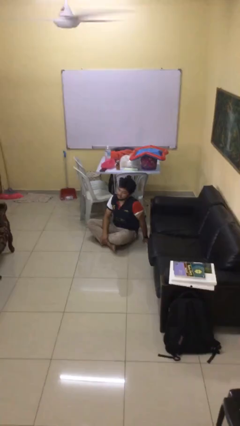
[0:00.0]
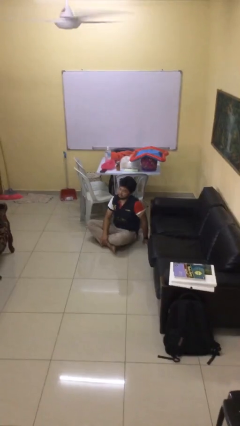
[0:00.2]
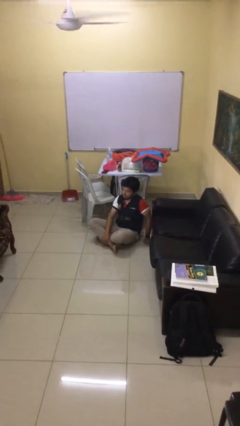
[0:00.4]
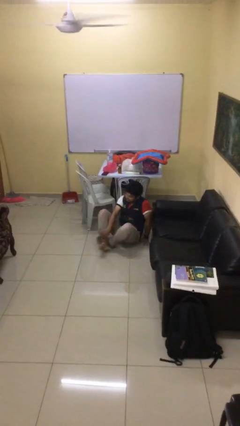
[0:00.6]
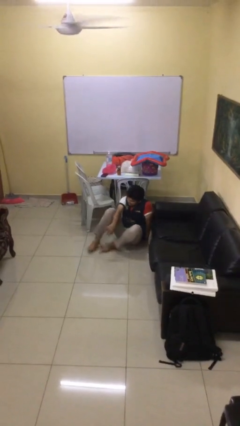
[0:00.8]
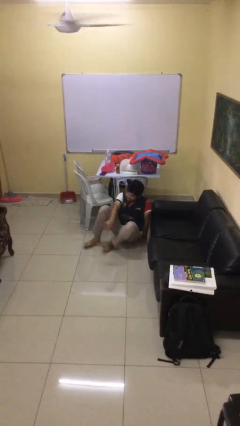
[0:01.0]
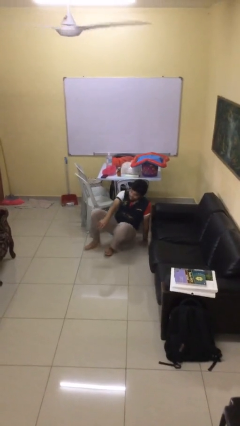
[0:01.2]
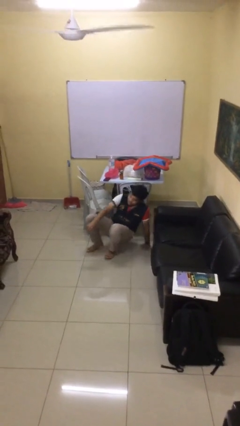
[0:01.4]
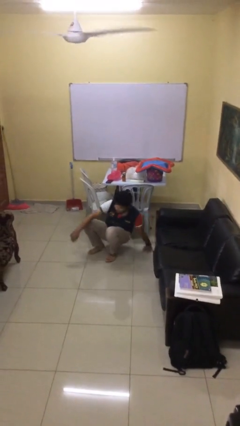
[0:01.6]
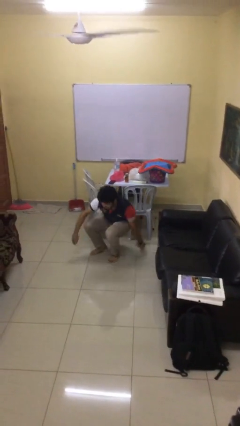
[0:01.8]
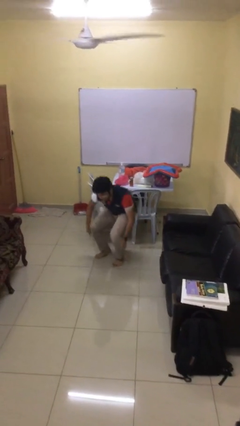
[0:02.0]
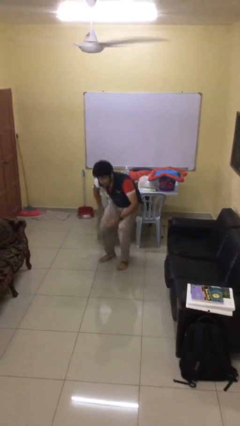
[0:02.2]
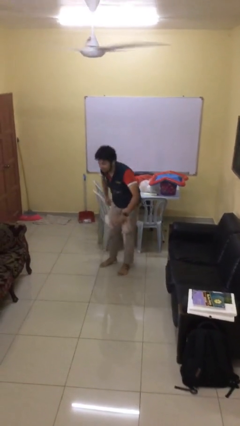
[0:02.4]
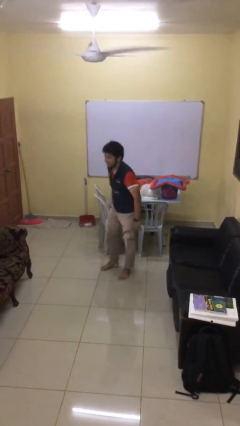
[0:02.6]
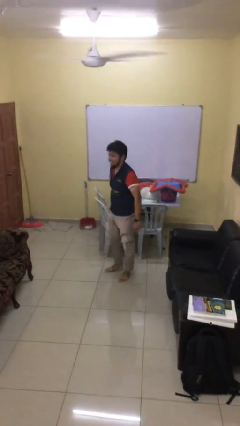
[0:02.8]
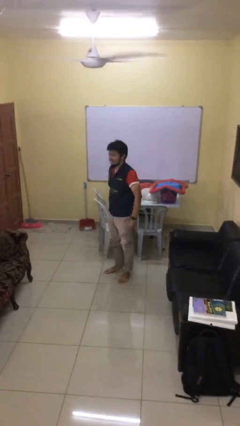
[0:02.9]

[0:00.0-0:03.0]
person stands up from floor

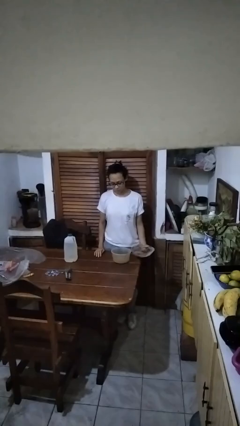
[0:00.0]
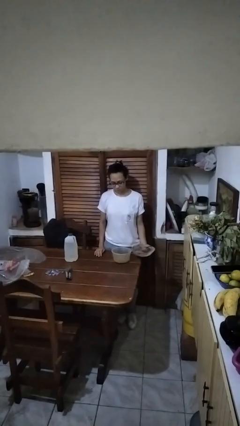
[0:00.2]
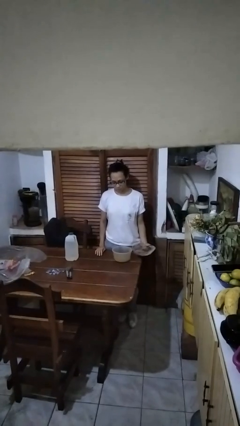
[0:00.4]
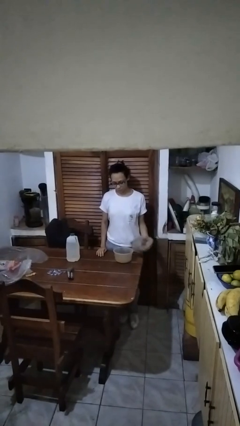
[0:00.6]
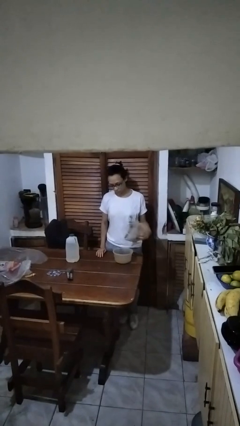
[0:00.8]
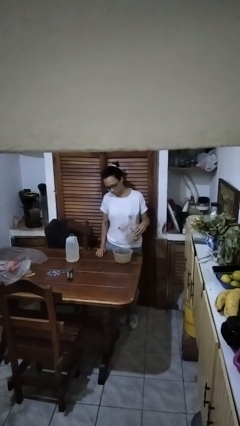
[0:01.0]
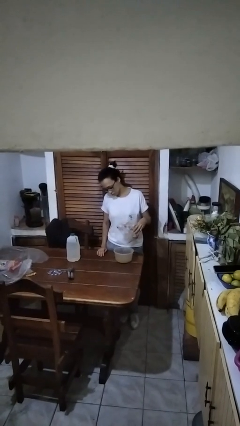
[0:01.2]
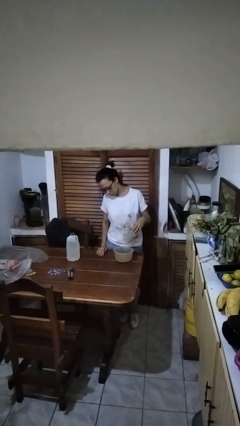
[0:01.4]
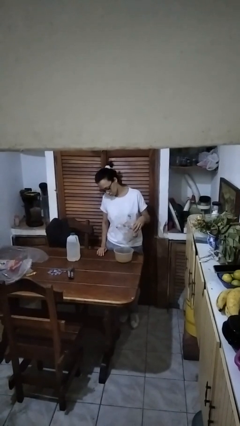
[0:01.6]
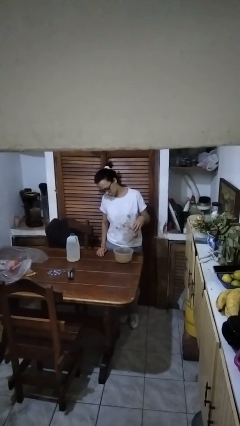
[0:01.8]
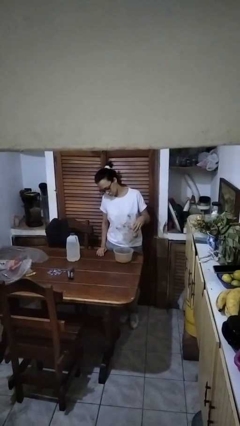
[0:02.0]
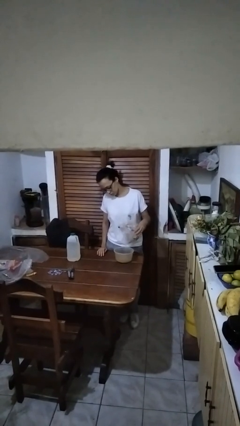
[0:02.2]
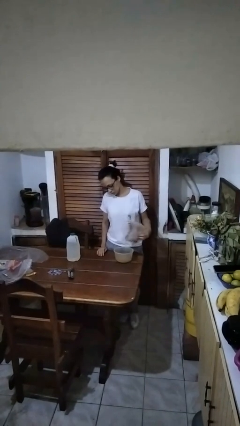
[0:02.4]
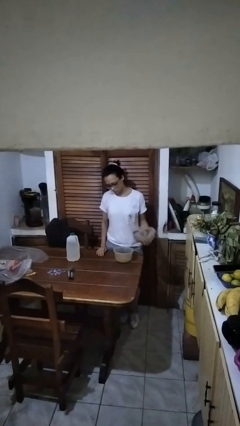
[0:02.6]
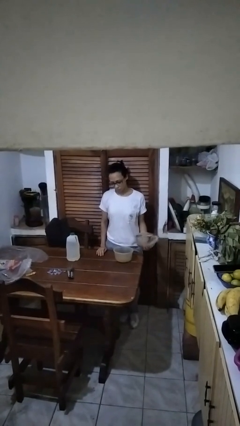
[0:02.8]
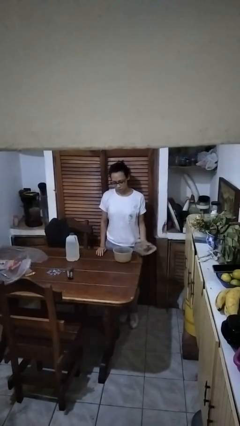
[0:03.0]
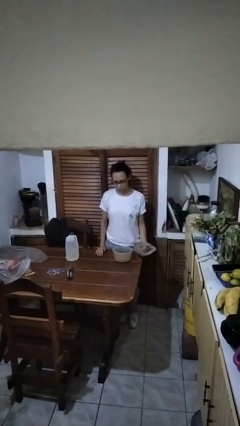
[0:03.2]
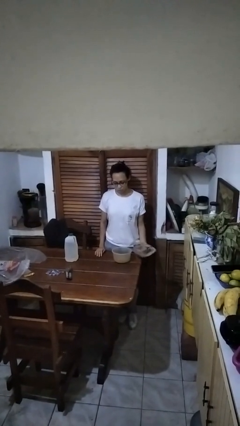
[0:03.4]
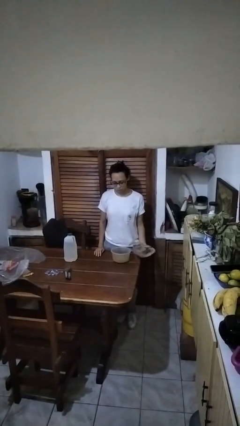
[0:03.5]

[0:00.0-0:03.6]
person pours into bowl

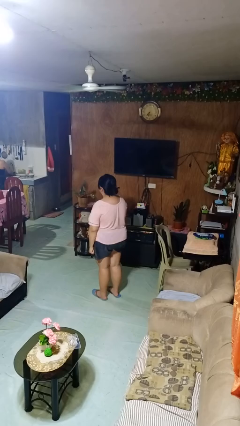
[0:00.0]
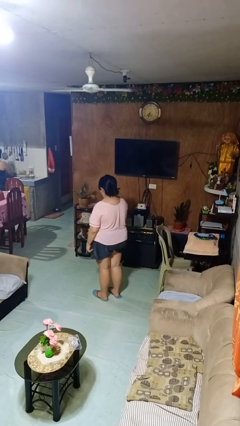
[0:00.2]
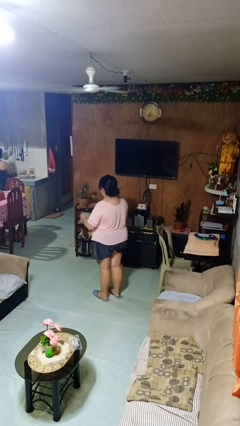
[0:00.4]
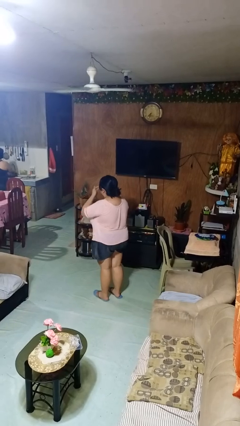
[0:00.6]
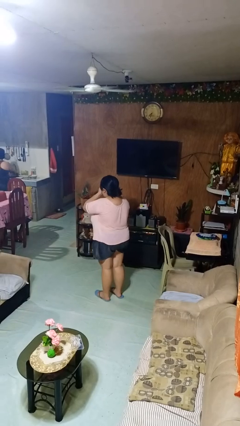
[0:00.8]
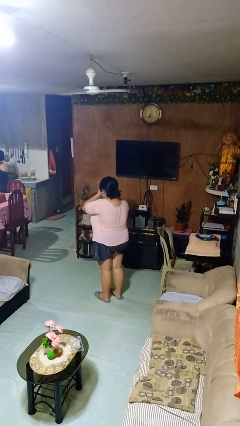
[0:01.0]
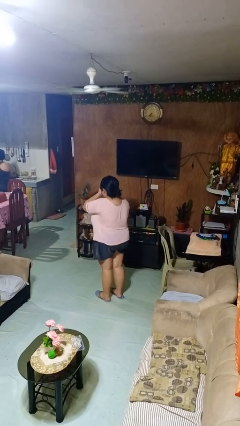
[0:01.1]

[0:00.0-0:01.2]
person yawns

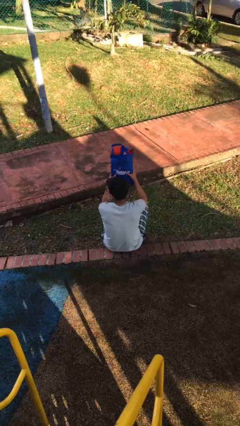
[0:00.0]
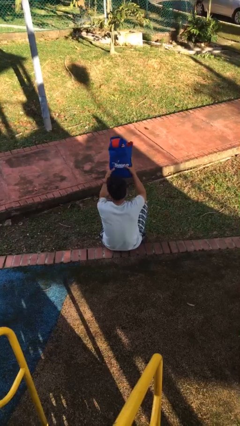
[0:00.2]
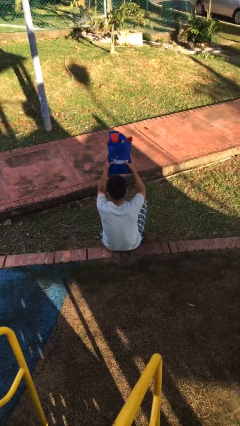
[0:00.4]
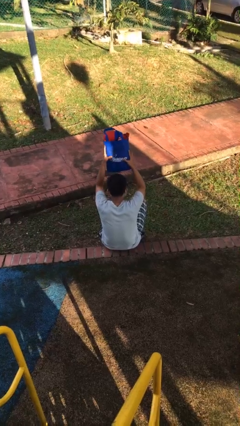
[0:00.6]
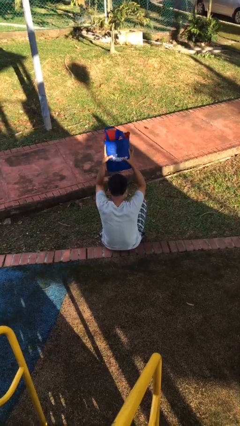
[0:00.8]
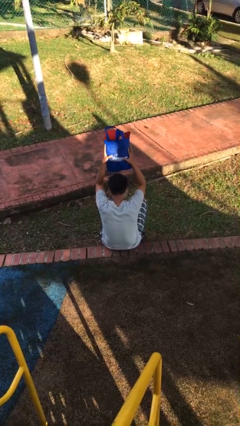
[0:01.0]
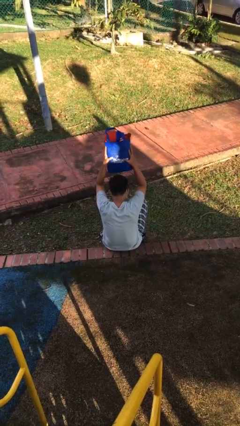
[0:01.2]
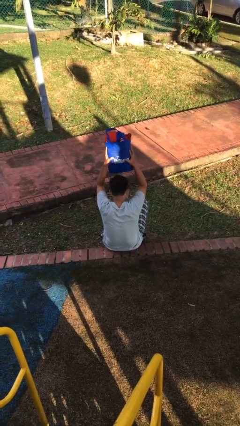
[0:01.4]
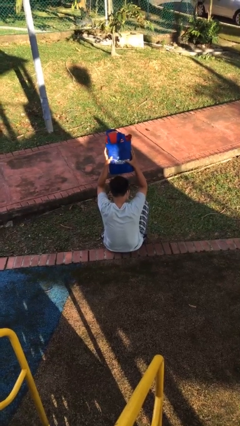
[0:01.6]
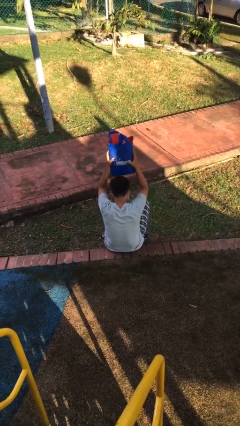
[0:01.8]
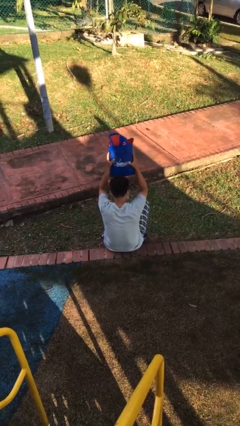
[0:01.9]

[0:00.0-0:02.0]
person holds object above head

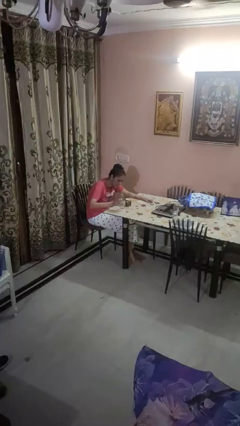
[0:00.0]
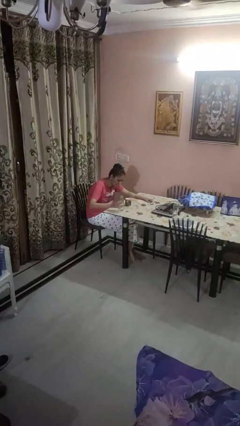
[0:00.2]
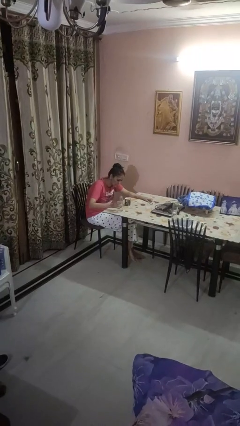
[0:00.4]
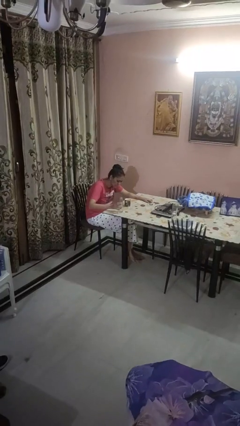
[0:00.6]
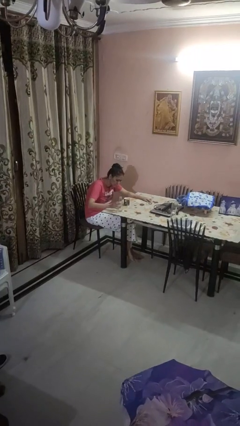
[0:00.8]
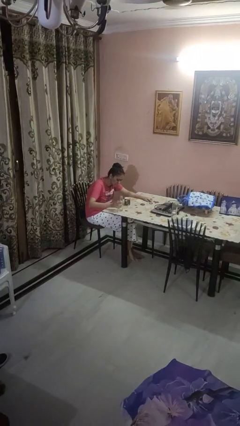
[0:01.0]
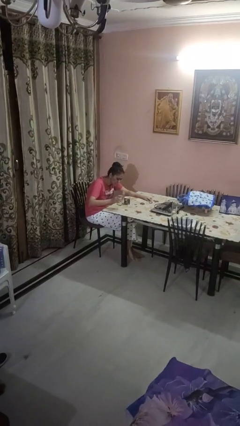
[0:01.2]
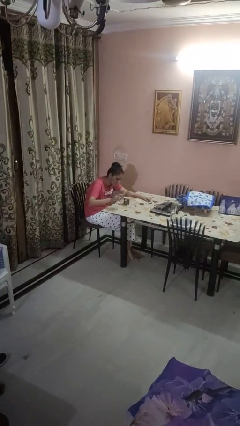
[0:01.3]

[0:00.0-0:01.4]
person pours liquid into cup

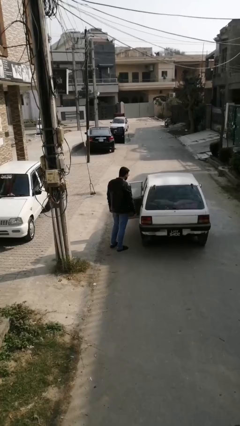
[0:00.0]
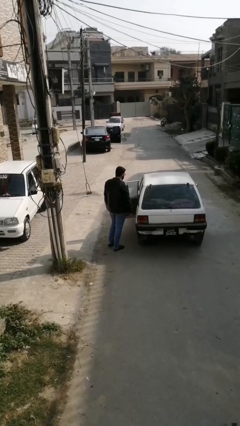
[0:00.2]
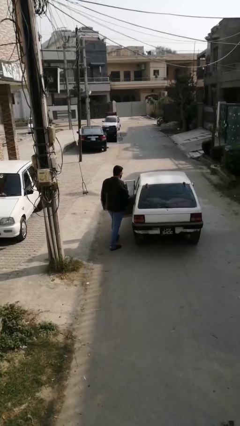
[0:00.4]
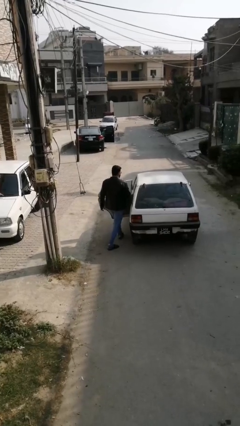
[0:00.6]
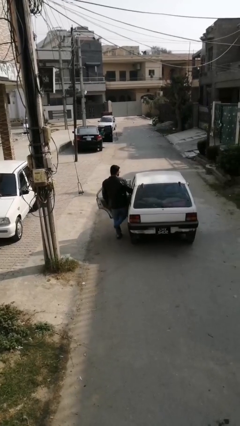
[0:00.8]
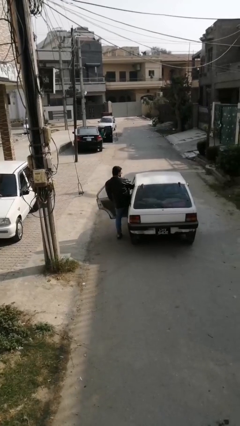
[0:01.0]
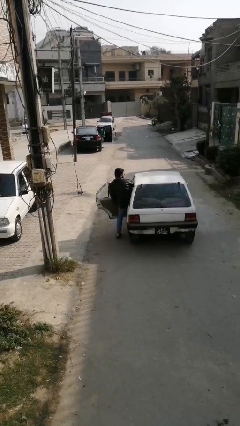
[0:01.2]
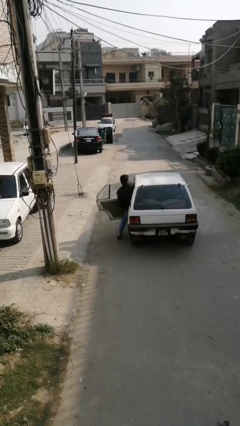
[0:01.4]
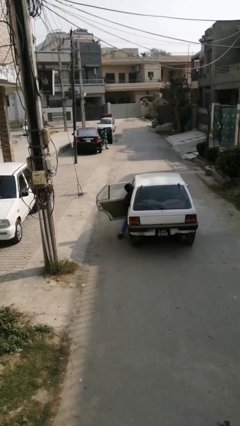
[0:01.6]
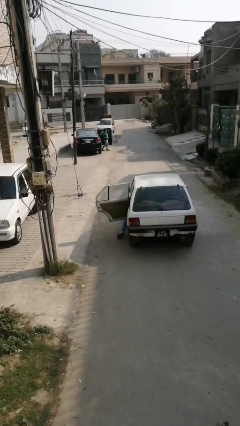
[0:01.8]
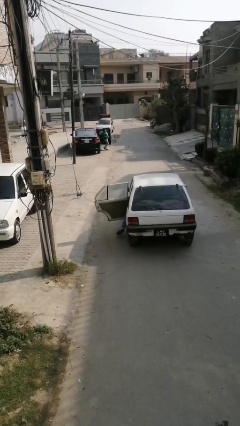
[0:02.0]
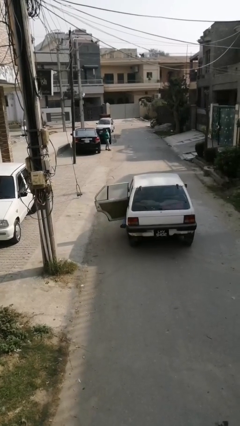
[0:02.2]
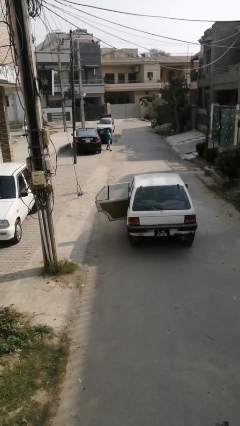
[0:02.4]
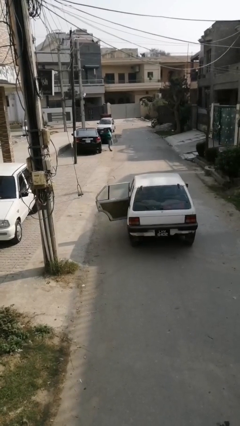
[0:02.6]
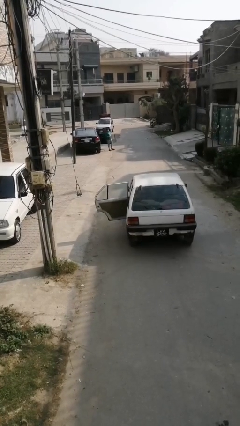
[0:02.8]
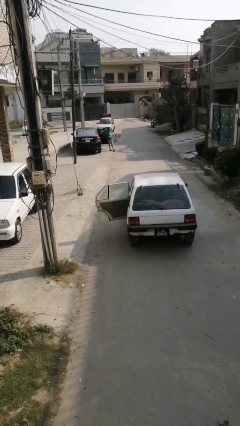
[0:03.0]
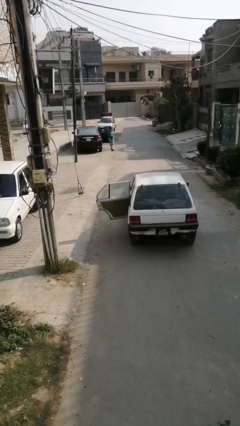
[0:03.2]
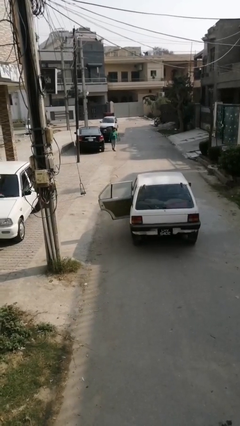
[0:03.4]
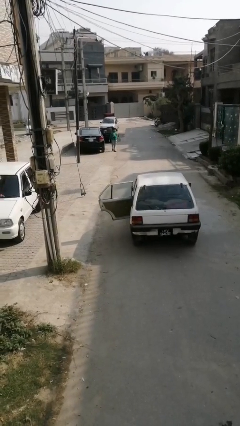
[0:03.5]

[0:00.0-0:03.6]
person enters car

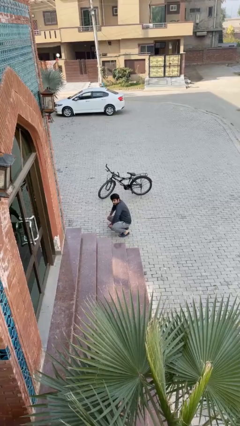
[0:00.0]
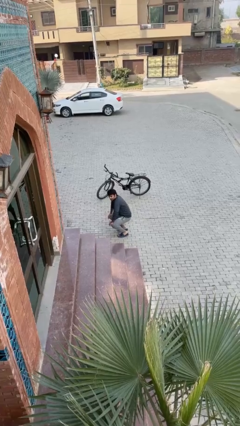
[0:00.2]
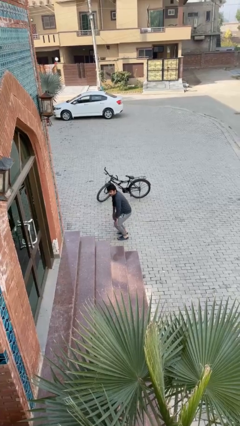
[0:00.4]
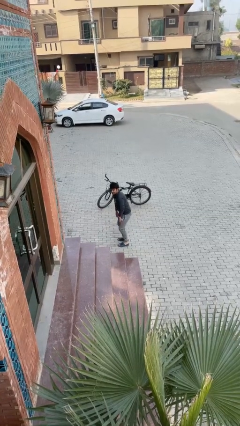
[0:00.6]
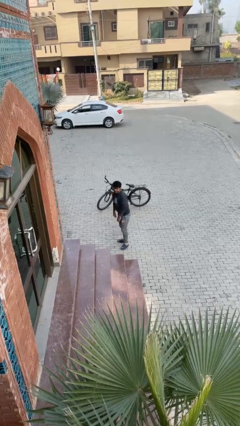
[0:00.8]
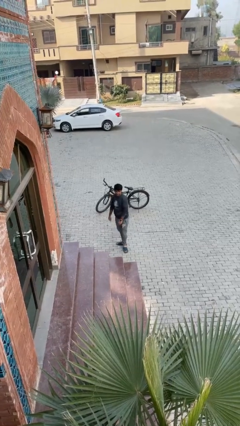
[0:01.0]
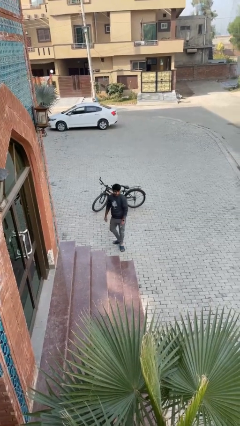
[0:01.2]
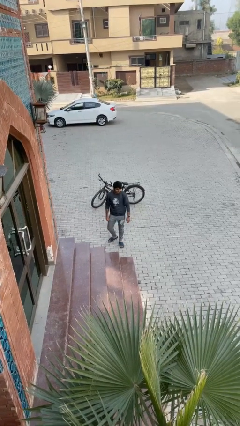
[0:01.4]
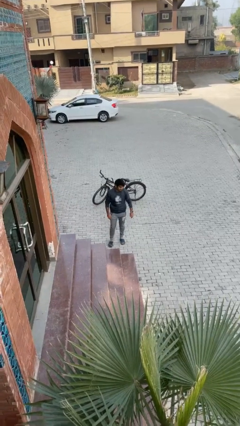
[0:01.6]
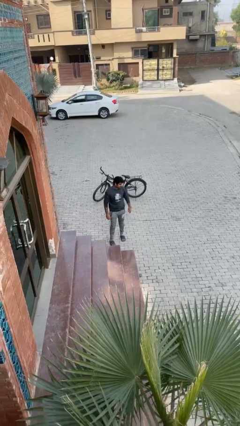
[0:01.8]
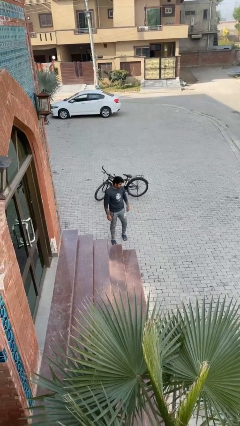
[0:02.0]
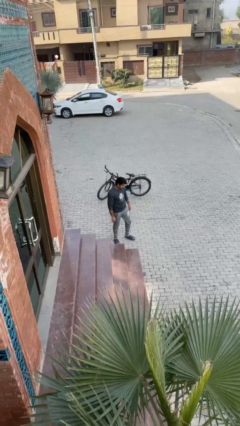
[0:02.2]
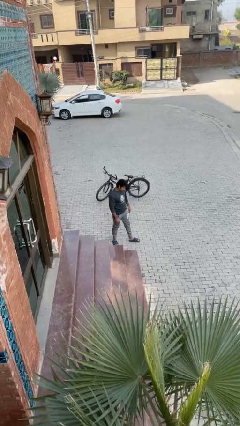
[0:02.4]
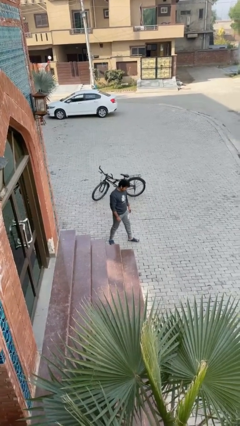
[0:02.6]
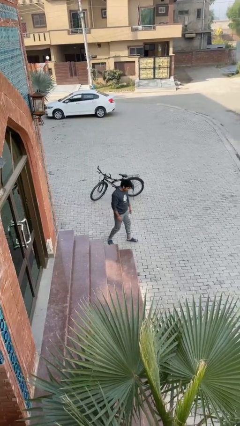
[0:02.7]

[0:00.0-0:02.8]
person stands up
